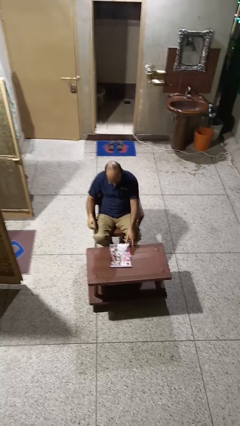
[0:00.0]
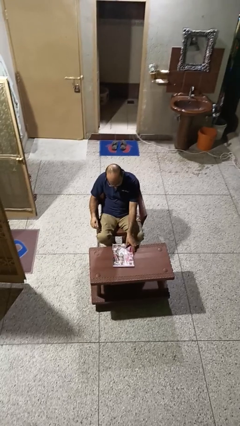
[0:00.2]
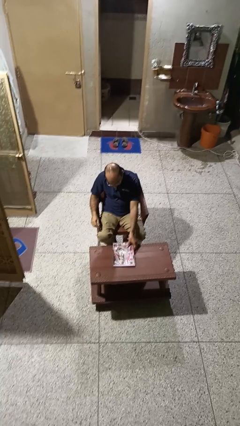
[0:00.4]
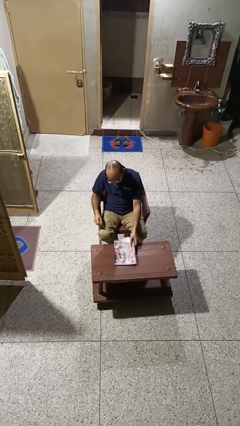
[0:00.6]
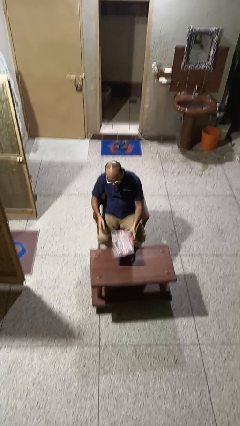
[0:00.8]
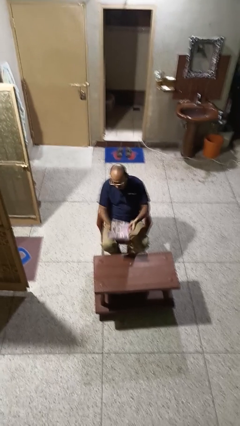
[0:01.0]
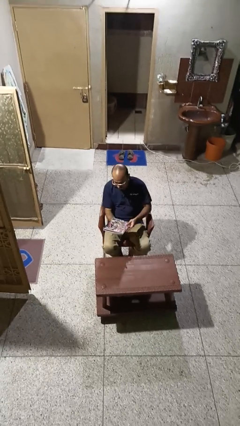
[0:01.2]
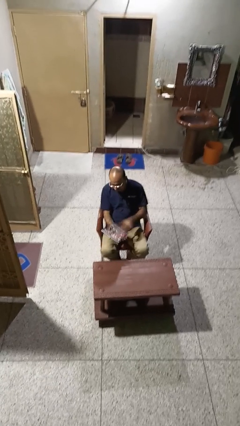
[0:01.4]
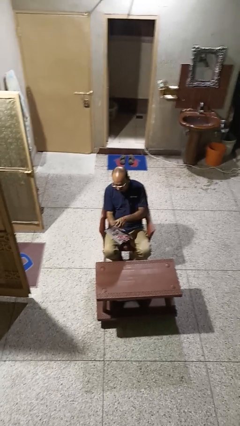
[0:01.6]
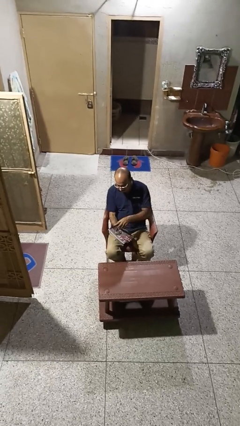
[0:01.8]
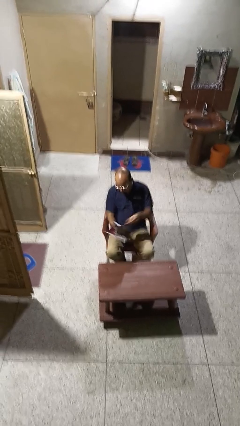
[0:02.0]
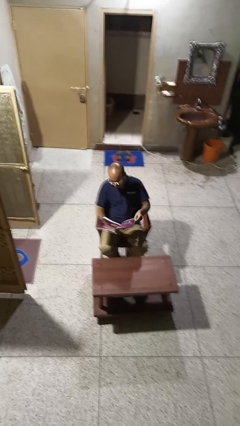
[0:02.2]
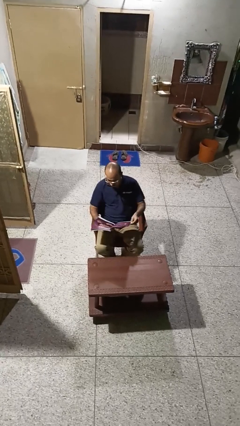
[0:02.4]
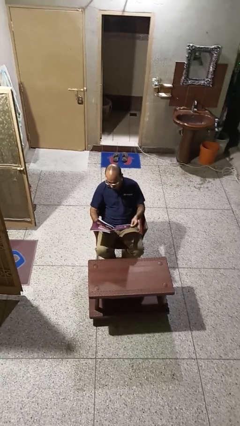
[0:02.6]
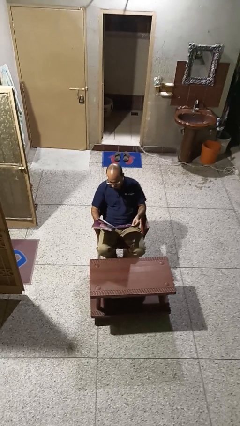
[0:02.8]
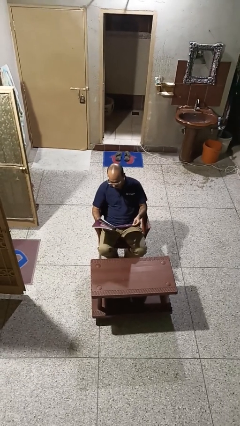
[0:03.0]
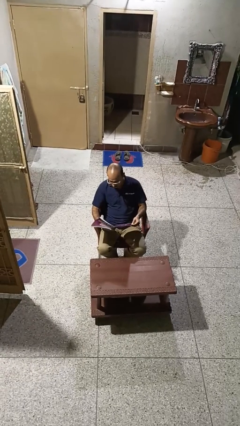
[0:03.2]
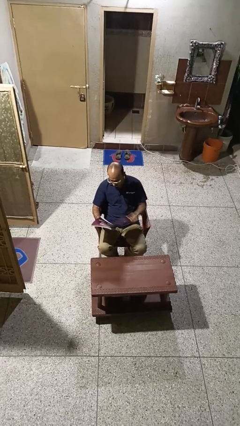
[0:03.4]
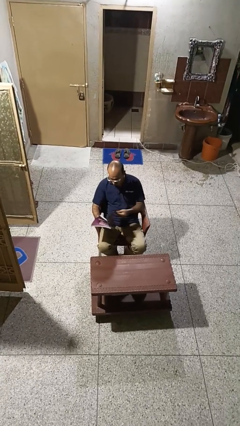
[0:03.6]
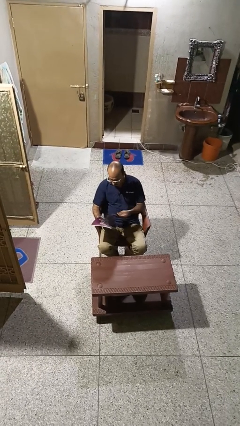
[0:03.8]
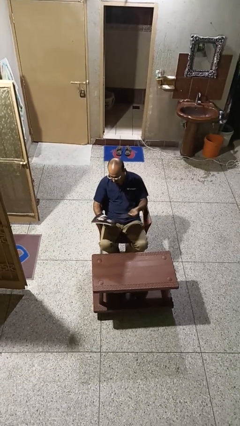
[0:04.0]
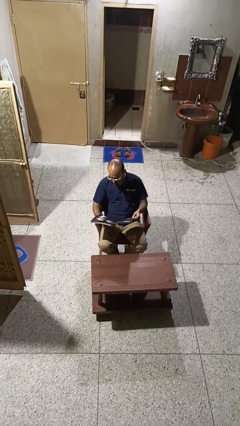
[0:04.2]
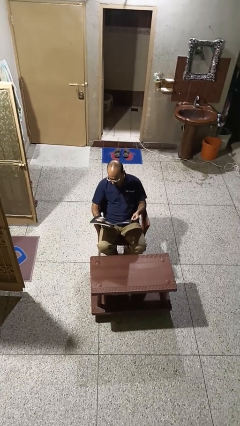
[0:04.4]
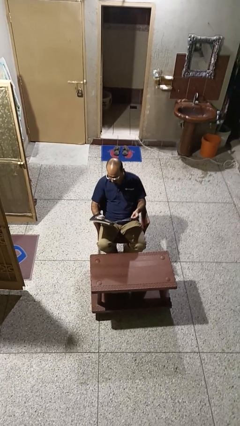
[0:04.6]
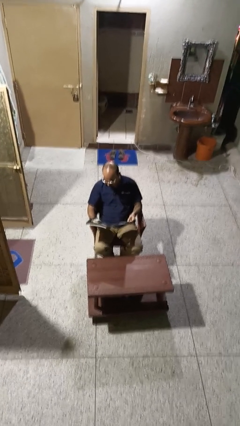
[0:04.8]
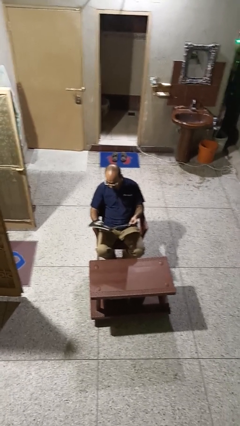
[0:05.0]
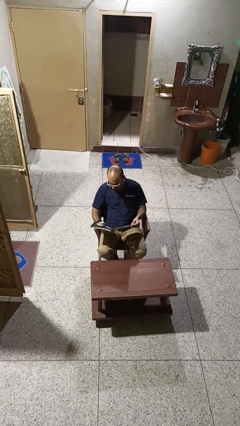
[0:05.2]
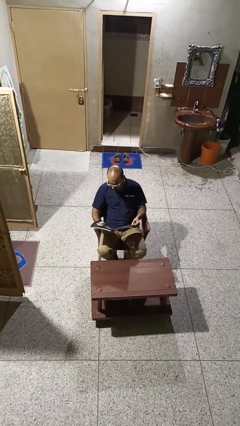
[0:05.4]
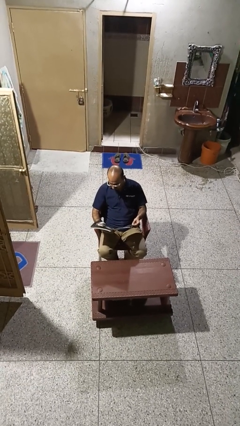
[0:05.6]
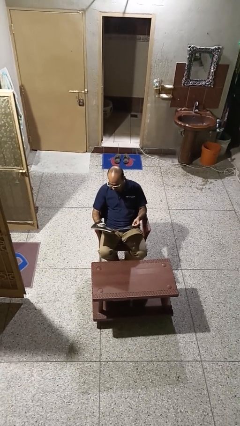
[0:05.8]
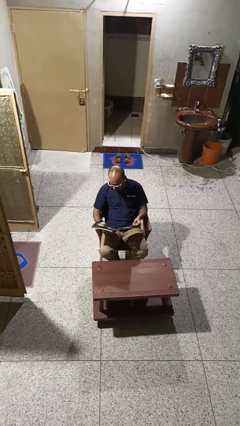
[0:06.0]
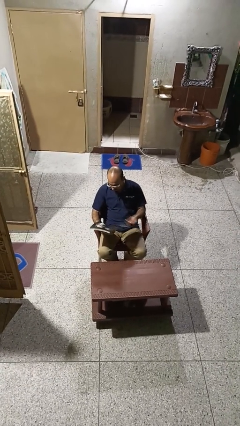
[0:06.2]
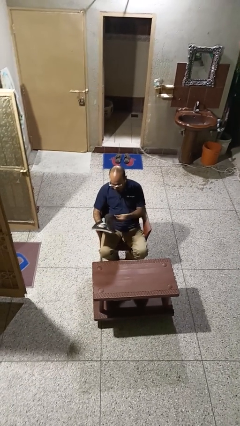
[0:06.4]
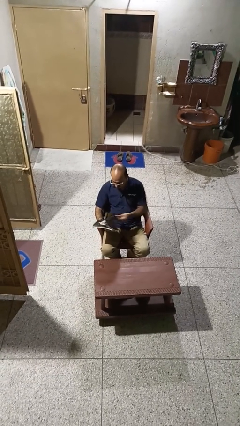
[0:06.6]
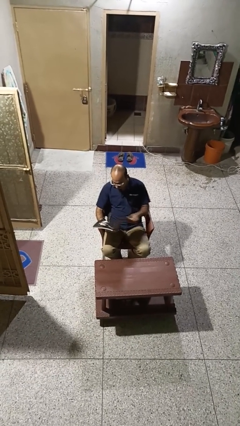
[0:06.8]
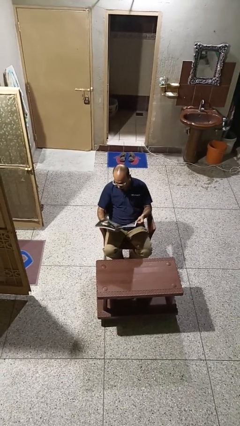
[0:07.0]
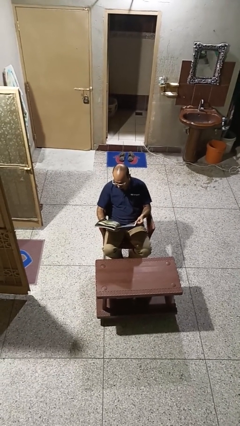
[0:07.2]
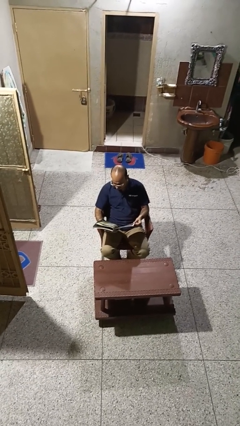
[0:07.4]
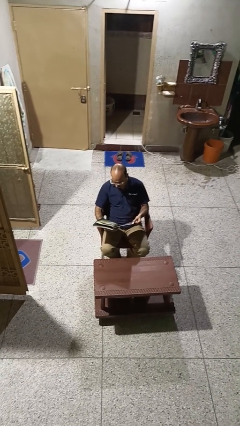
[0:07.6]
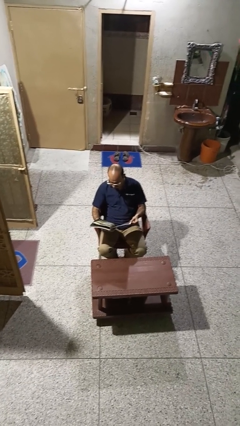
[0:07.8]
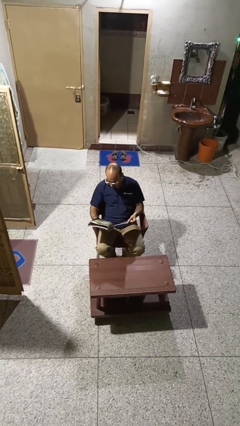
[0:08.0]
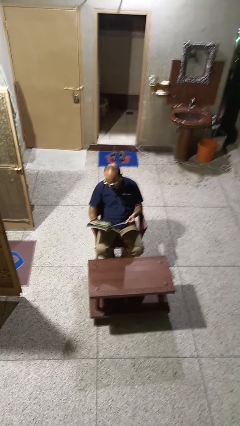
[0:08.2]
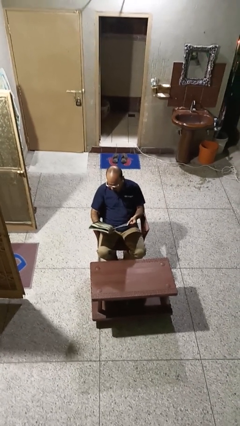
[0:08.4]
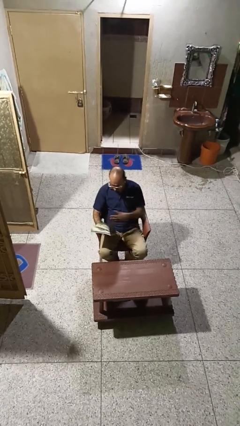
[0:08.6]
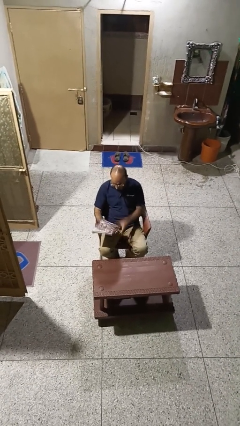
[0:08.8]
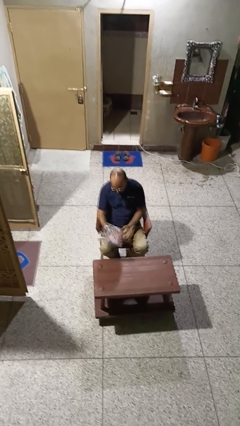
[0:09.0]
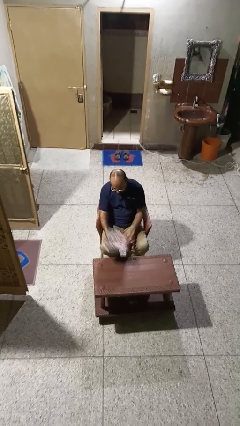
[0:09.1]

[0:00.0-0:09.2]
person reads magazine

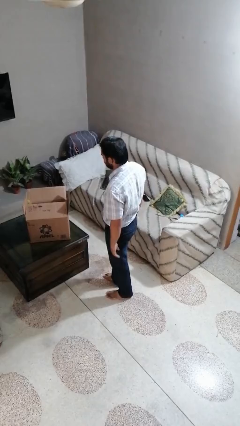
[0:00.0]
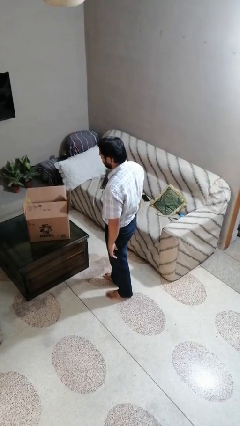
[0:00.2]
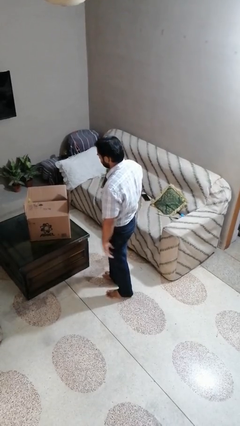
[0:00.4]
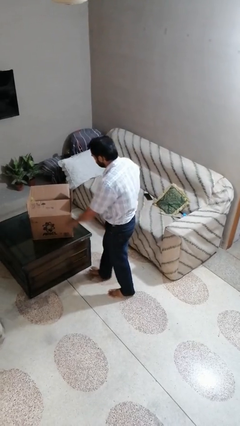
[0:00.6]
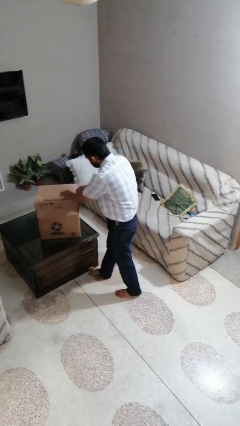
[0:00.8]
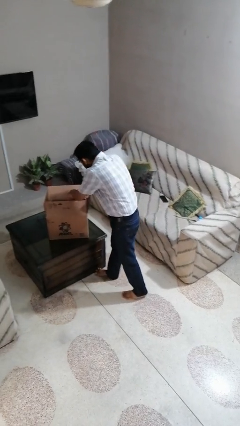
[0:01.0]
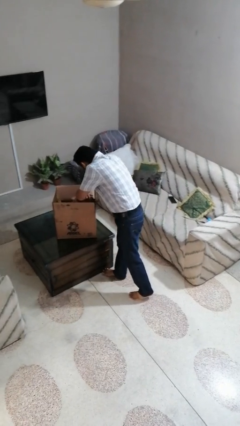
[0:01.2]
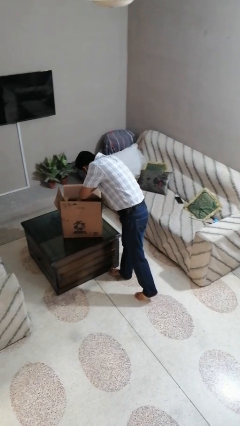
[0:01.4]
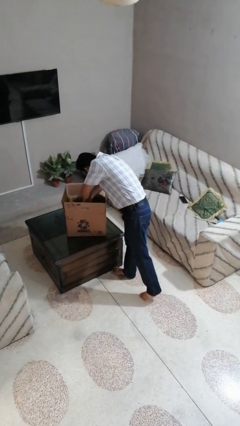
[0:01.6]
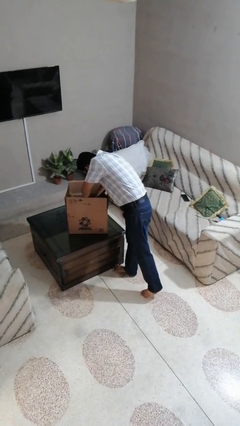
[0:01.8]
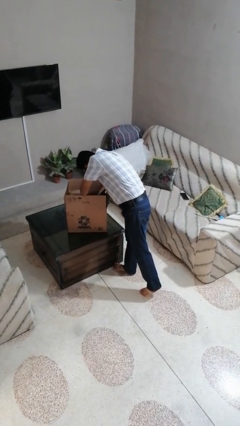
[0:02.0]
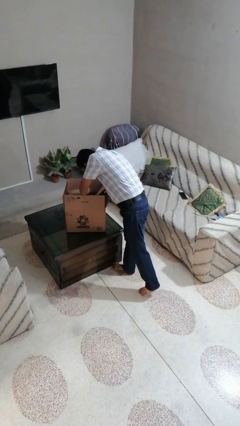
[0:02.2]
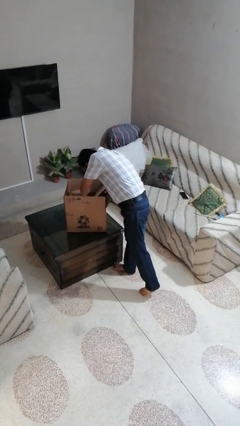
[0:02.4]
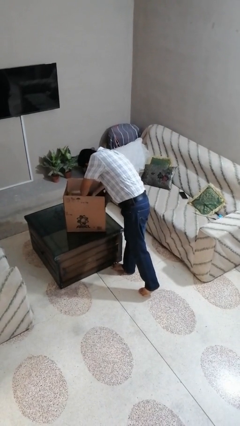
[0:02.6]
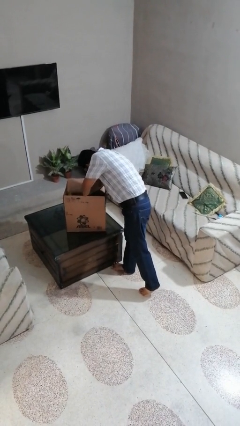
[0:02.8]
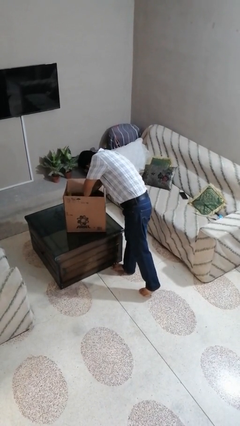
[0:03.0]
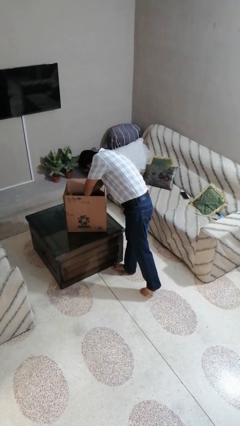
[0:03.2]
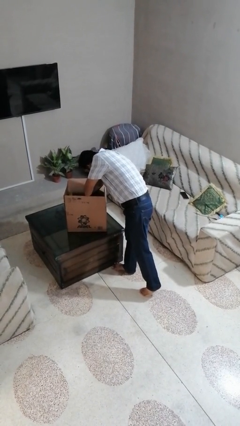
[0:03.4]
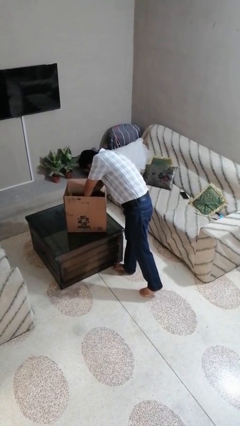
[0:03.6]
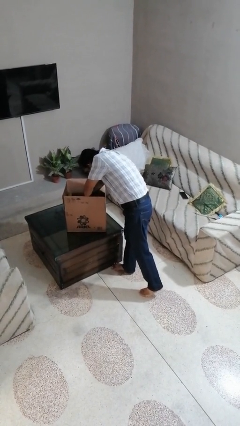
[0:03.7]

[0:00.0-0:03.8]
person searches in box

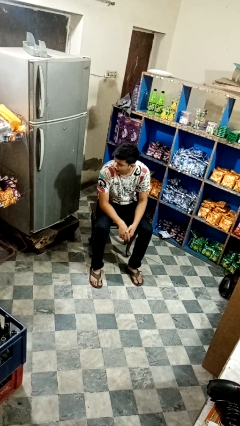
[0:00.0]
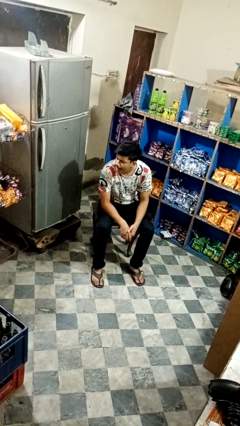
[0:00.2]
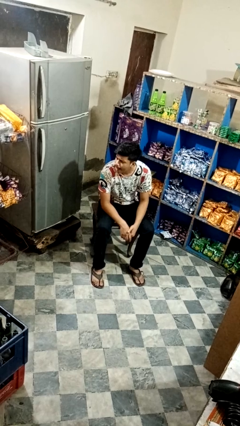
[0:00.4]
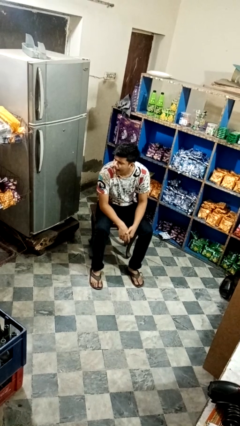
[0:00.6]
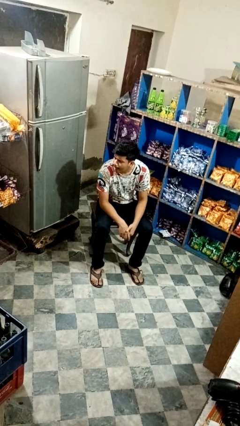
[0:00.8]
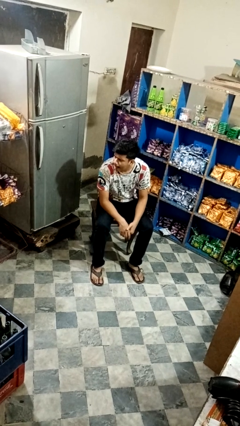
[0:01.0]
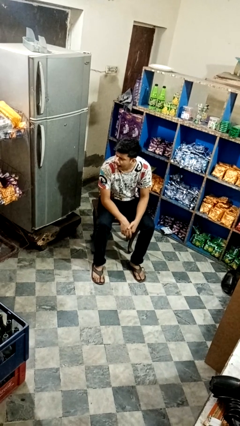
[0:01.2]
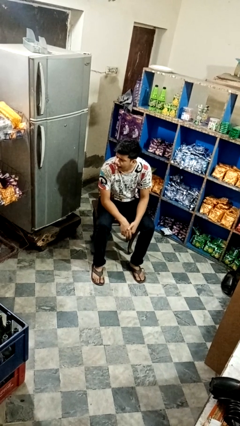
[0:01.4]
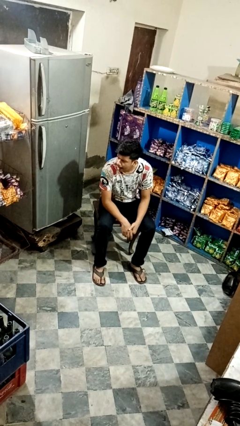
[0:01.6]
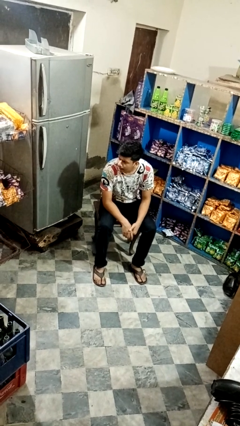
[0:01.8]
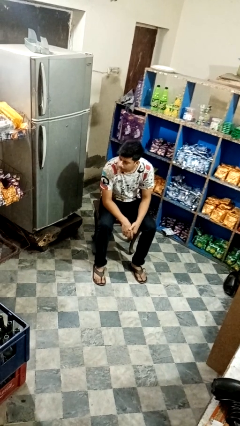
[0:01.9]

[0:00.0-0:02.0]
person sticks out tongue

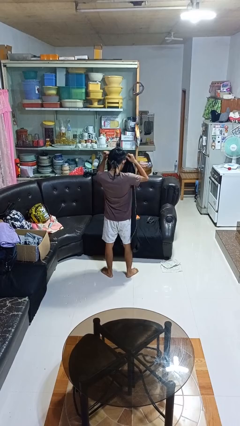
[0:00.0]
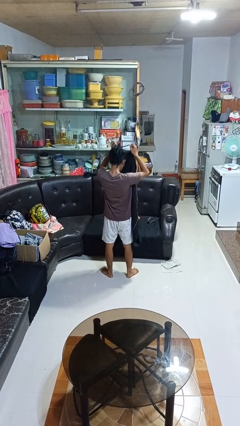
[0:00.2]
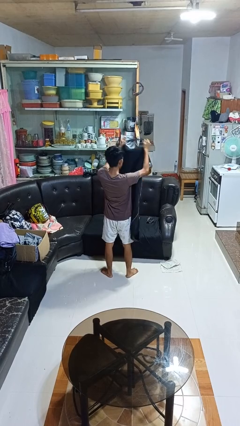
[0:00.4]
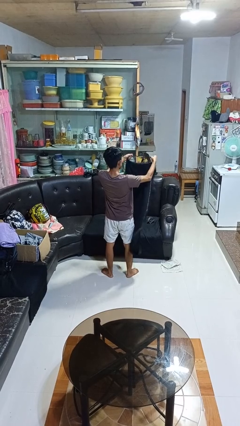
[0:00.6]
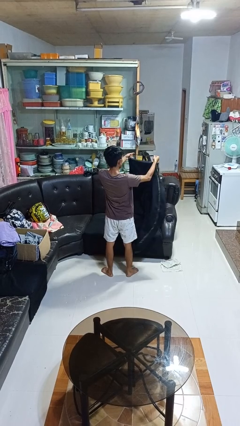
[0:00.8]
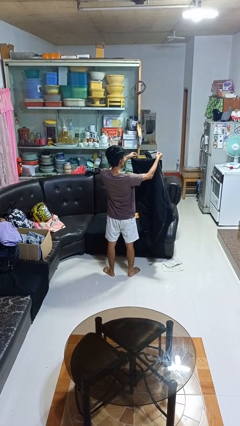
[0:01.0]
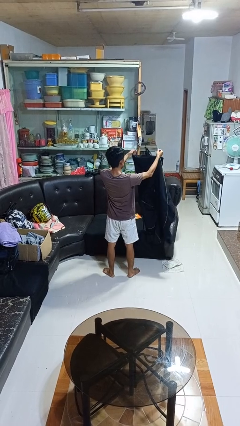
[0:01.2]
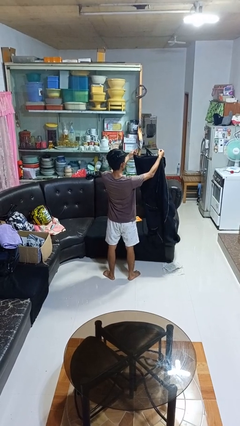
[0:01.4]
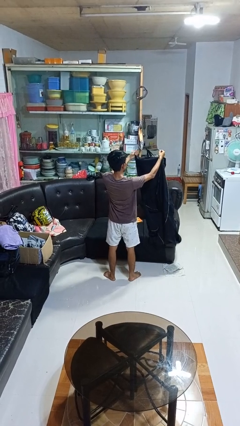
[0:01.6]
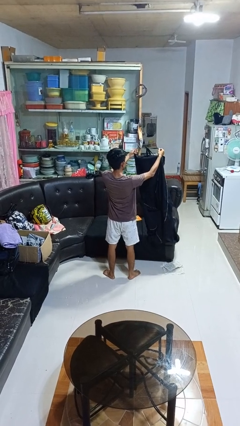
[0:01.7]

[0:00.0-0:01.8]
person takes off apron

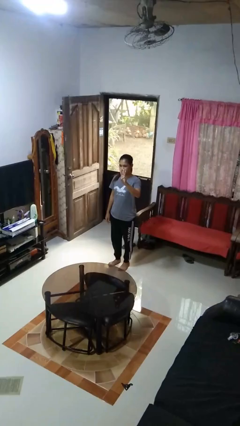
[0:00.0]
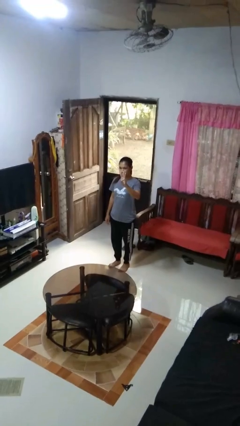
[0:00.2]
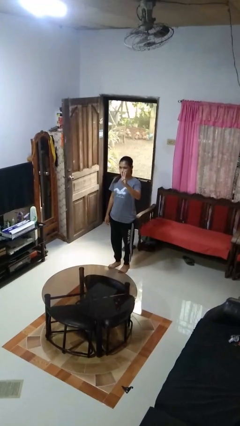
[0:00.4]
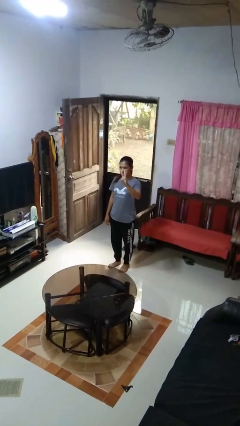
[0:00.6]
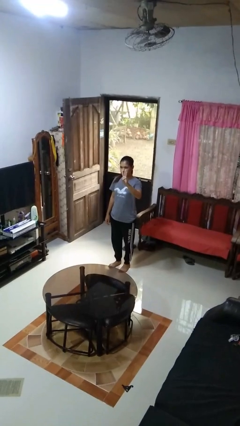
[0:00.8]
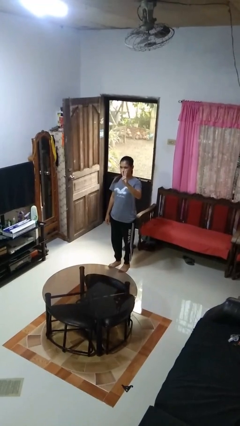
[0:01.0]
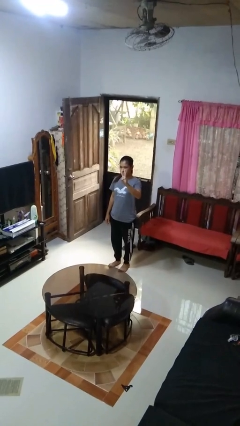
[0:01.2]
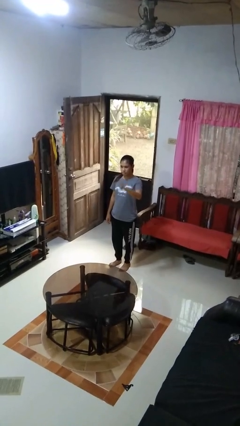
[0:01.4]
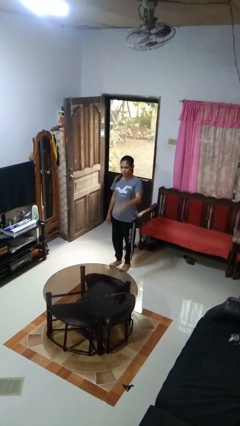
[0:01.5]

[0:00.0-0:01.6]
person gestures number three
